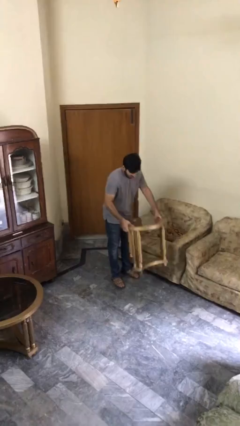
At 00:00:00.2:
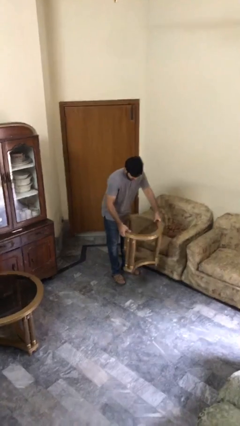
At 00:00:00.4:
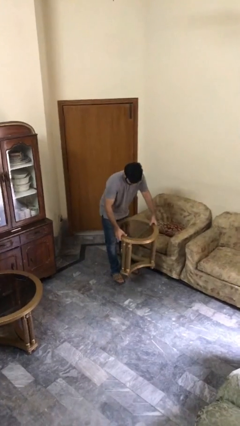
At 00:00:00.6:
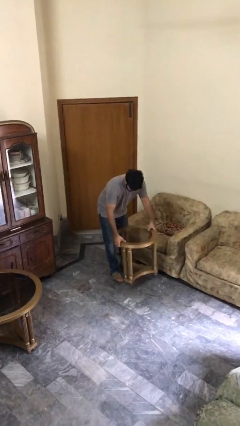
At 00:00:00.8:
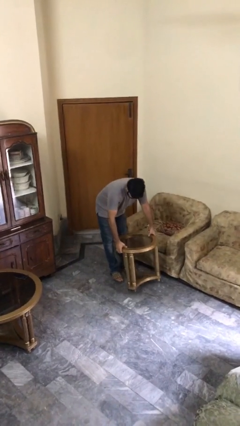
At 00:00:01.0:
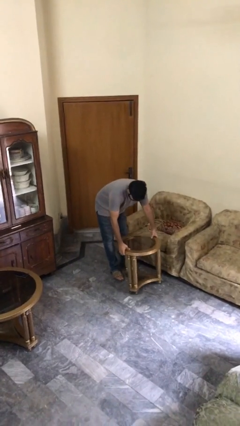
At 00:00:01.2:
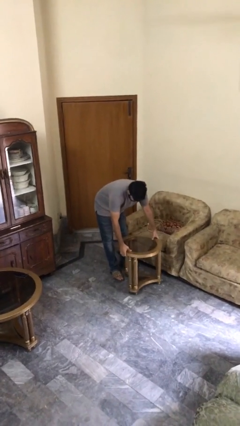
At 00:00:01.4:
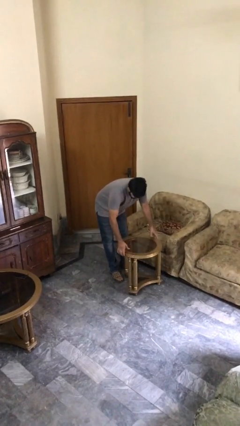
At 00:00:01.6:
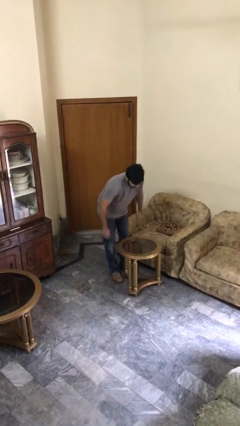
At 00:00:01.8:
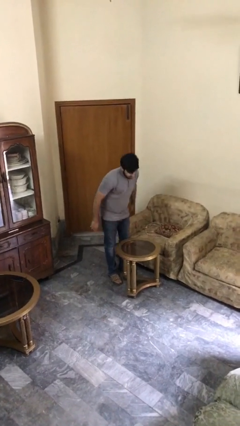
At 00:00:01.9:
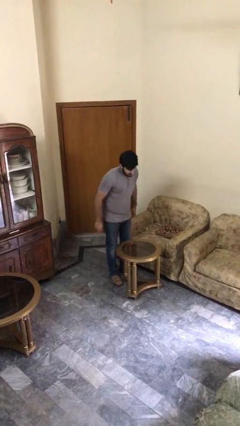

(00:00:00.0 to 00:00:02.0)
person puts down object on floor

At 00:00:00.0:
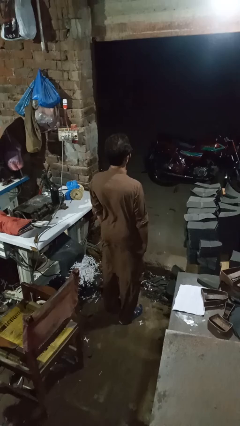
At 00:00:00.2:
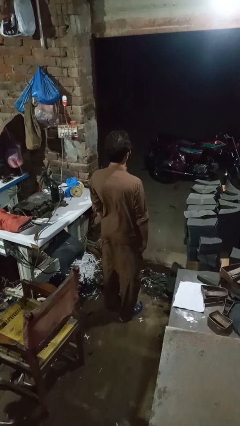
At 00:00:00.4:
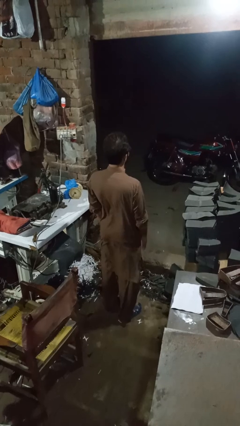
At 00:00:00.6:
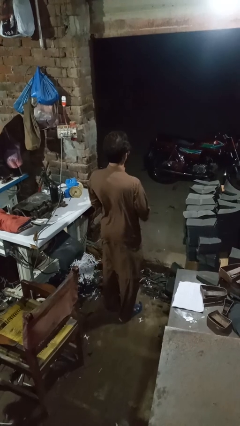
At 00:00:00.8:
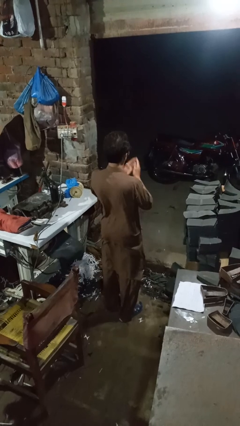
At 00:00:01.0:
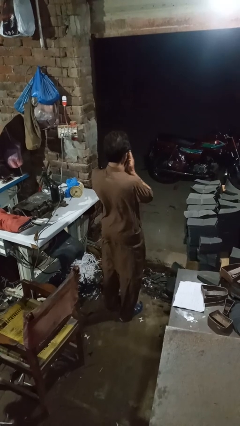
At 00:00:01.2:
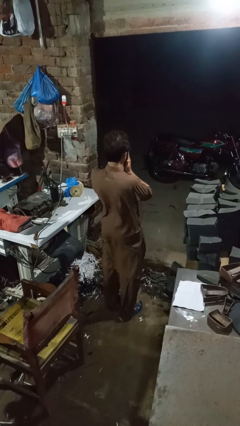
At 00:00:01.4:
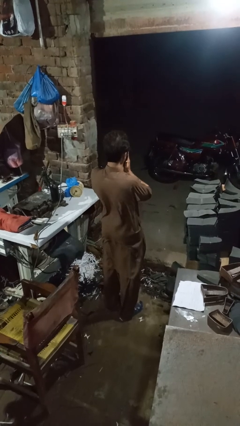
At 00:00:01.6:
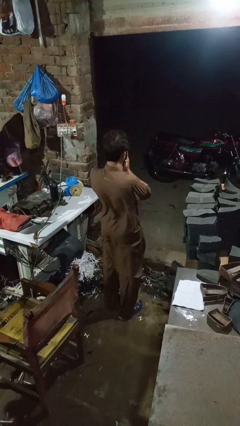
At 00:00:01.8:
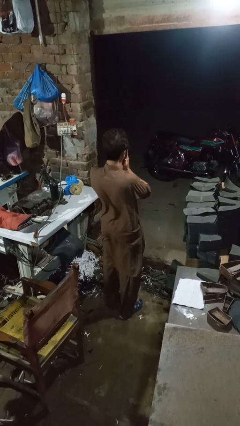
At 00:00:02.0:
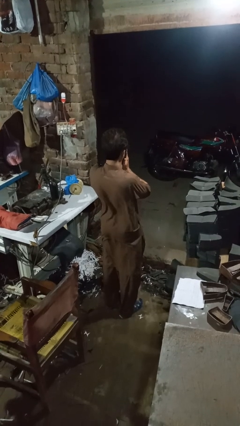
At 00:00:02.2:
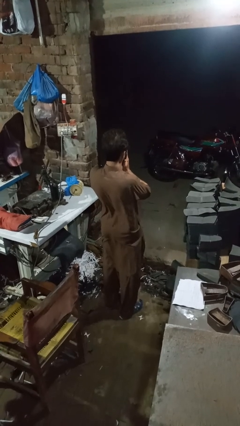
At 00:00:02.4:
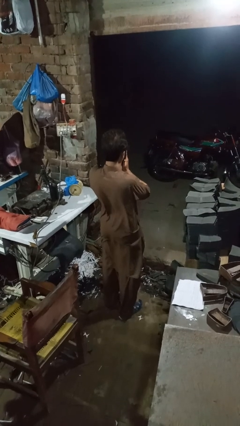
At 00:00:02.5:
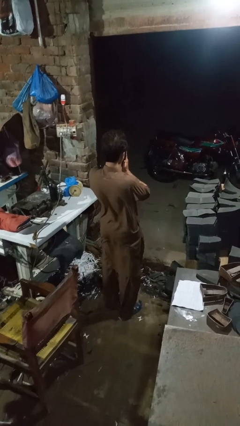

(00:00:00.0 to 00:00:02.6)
person sneezes into hand

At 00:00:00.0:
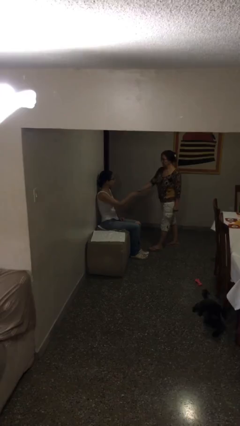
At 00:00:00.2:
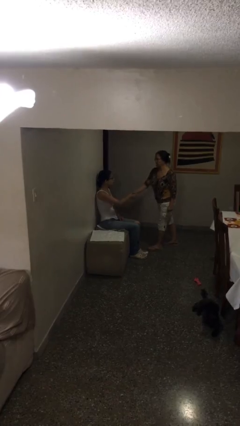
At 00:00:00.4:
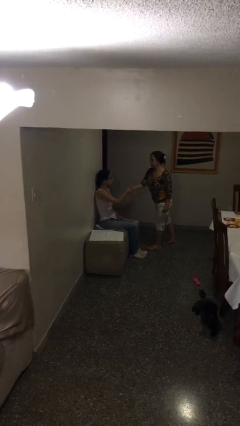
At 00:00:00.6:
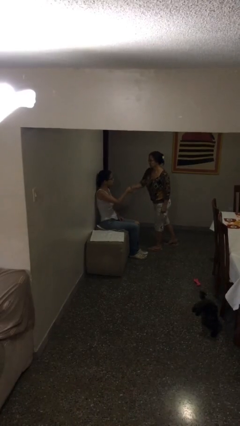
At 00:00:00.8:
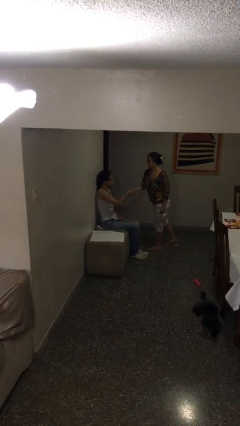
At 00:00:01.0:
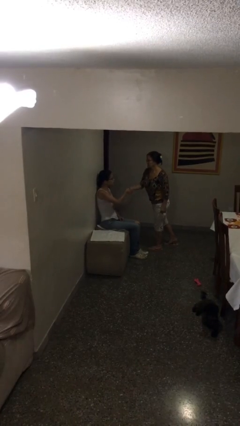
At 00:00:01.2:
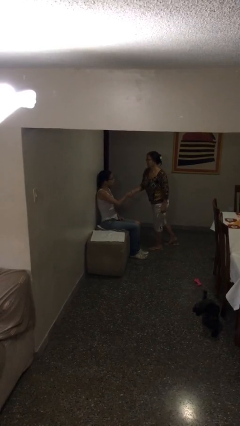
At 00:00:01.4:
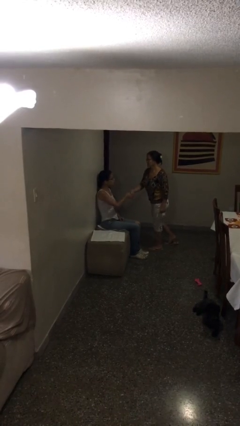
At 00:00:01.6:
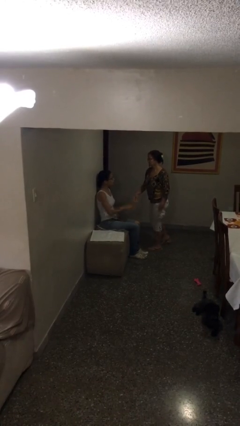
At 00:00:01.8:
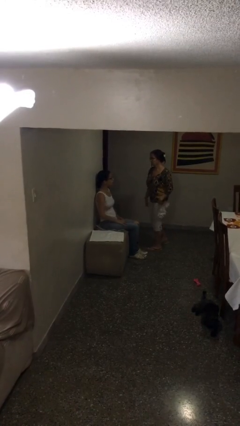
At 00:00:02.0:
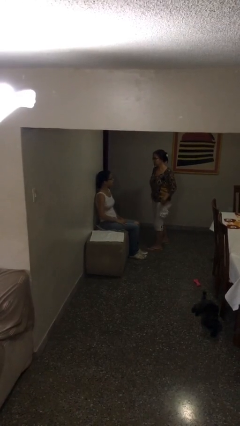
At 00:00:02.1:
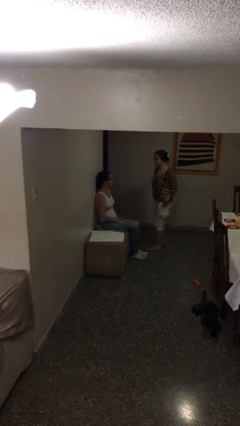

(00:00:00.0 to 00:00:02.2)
person shakes hand

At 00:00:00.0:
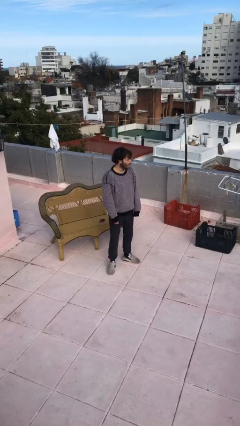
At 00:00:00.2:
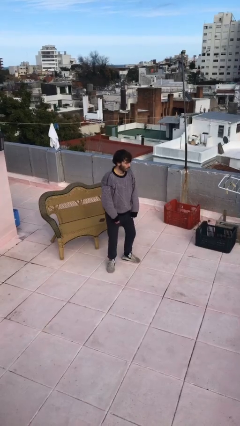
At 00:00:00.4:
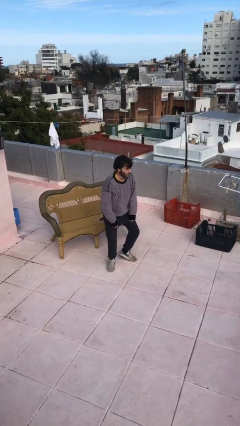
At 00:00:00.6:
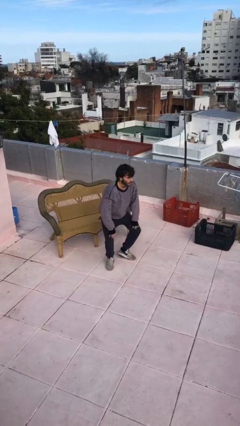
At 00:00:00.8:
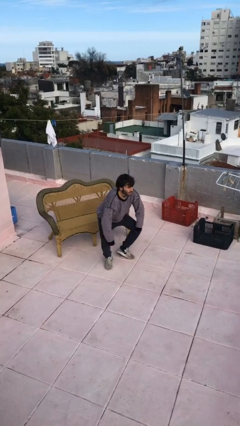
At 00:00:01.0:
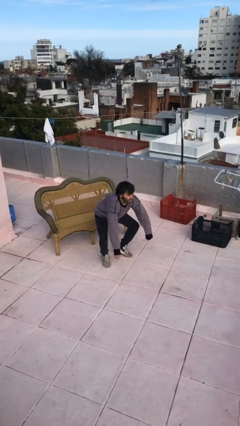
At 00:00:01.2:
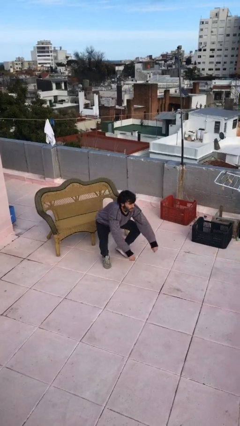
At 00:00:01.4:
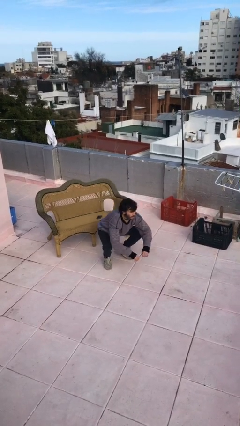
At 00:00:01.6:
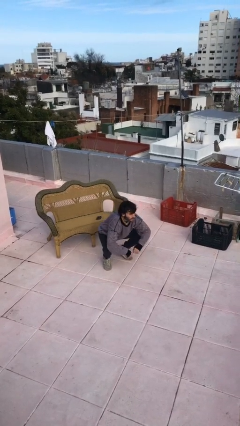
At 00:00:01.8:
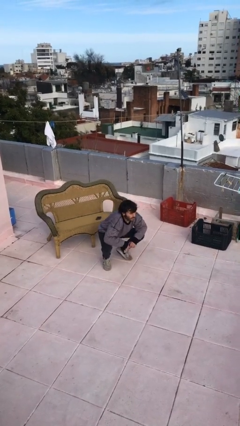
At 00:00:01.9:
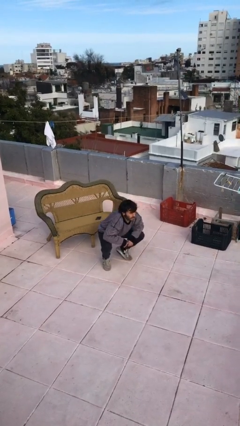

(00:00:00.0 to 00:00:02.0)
person squats

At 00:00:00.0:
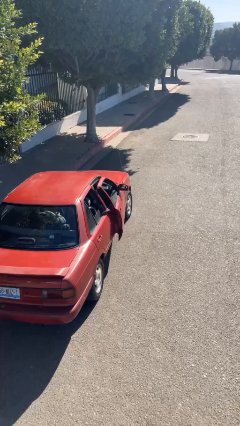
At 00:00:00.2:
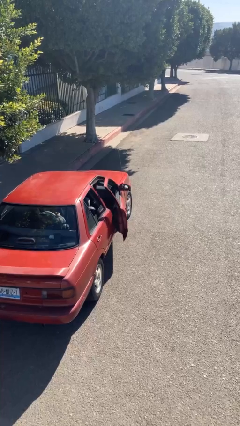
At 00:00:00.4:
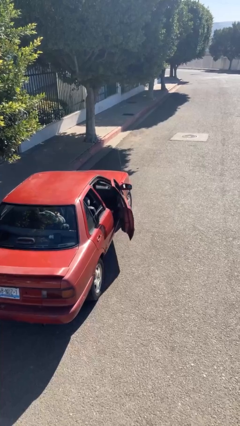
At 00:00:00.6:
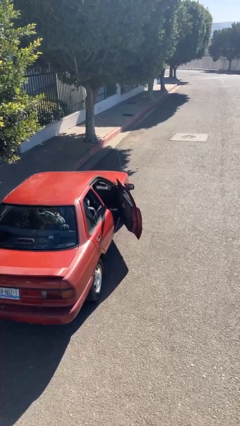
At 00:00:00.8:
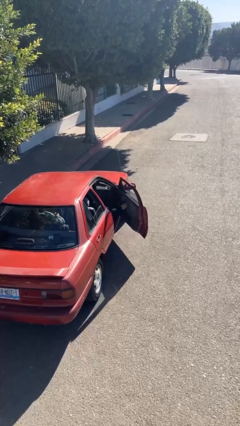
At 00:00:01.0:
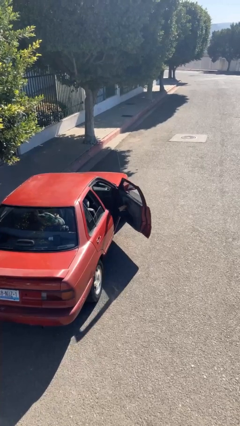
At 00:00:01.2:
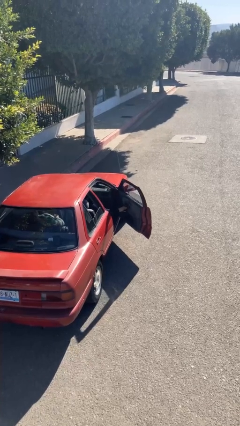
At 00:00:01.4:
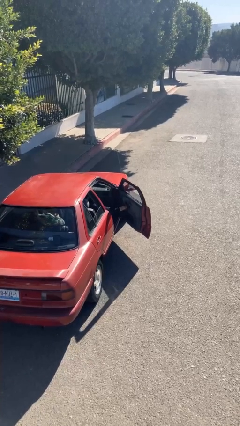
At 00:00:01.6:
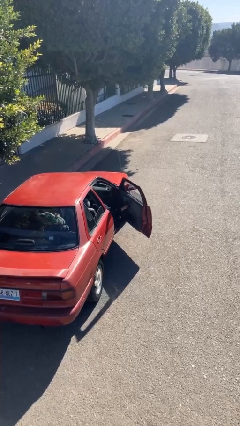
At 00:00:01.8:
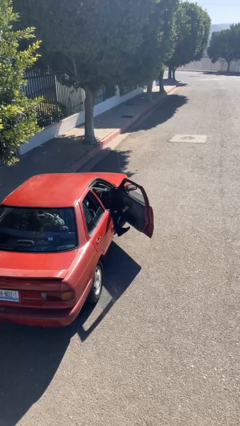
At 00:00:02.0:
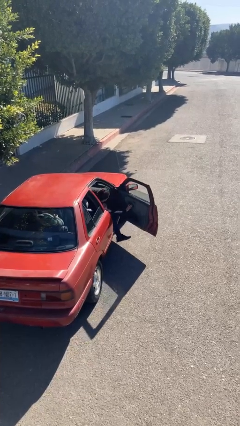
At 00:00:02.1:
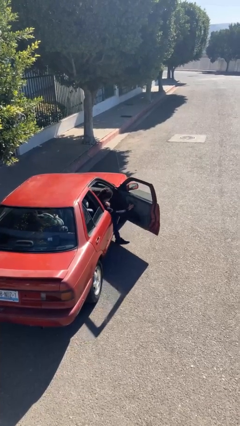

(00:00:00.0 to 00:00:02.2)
person opens car door

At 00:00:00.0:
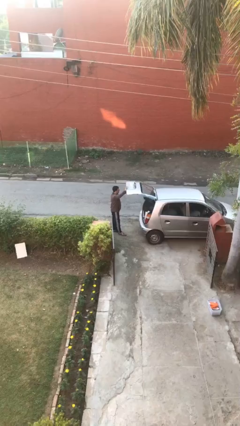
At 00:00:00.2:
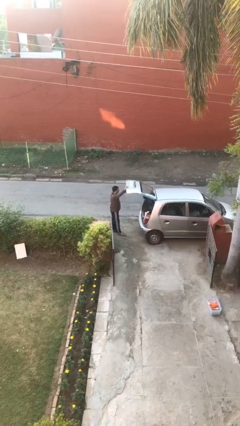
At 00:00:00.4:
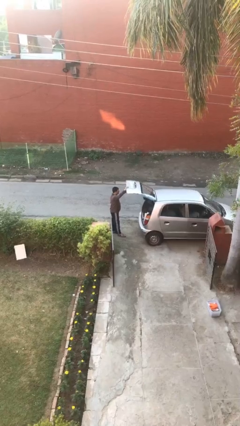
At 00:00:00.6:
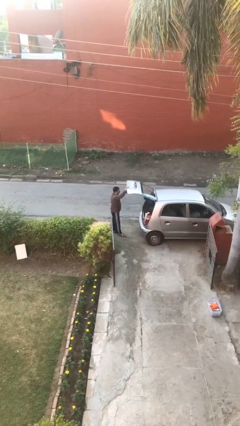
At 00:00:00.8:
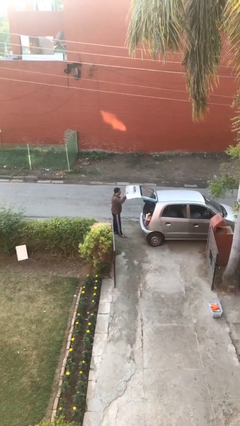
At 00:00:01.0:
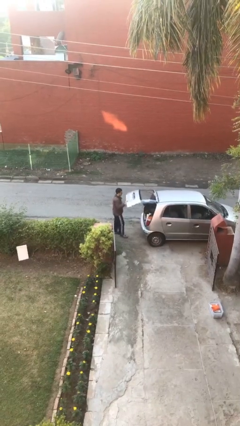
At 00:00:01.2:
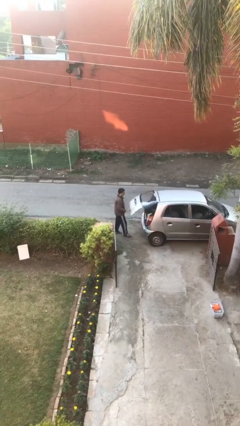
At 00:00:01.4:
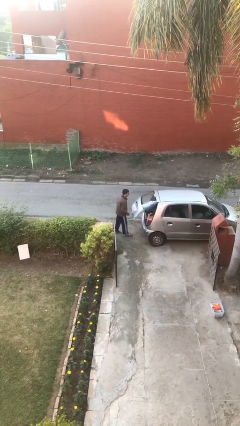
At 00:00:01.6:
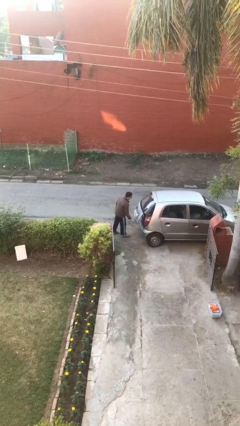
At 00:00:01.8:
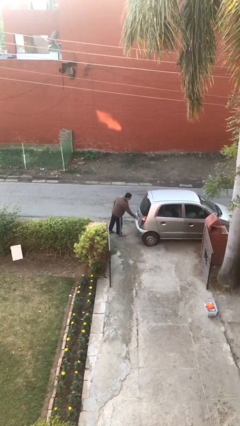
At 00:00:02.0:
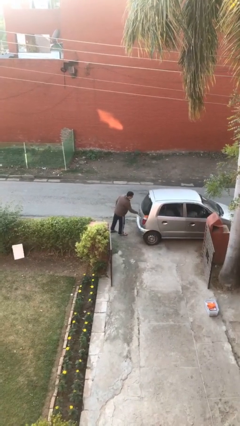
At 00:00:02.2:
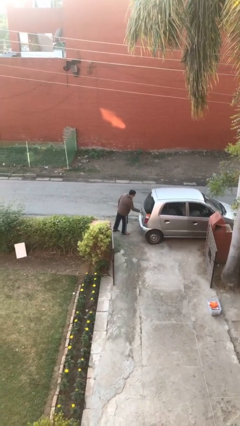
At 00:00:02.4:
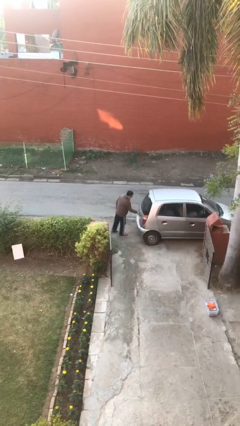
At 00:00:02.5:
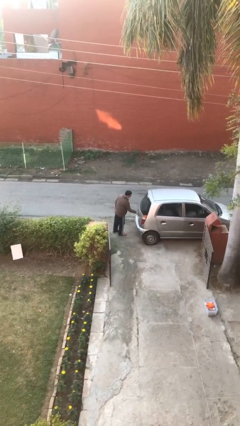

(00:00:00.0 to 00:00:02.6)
person closes car trunk

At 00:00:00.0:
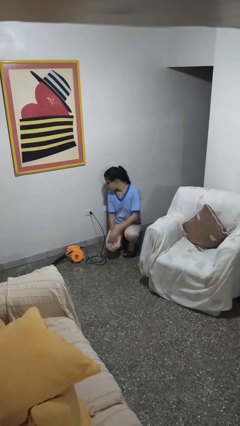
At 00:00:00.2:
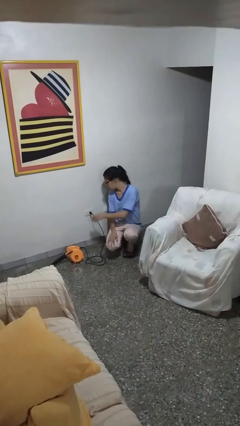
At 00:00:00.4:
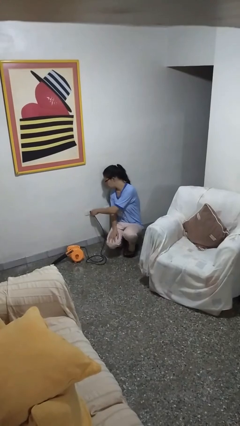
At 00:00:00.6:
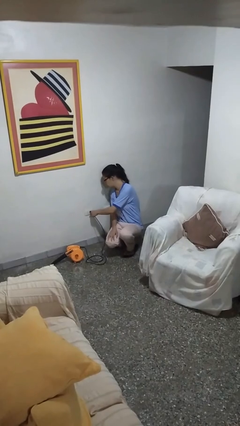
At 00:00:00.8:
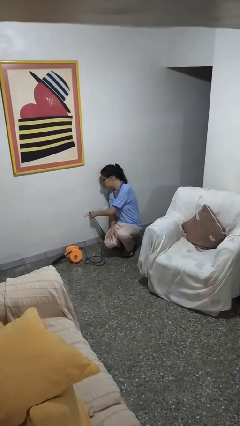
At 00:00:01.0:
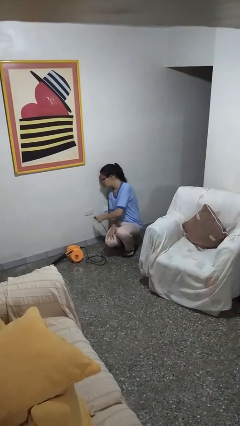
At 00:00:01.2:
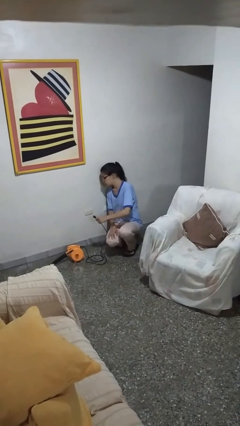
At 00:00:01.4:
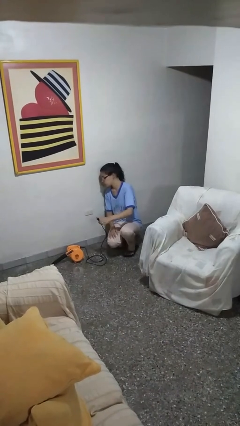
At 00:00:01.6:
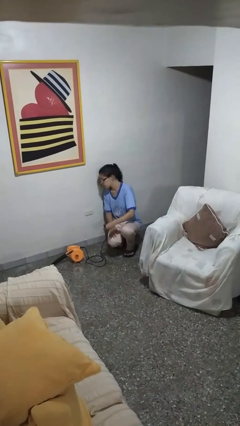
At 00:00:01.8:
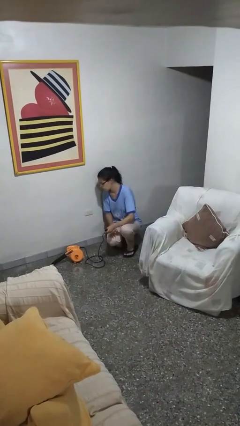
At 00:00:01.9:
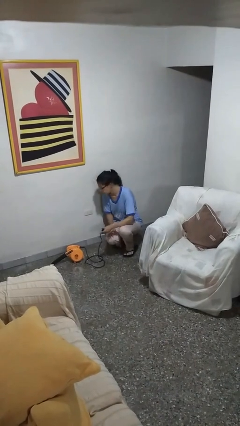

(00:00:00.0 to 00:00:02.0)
person unplugs from electrical socket

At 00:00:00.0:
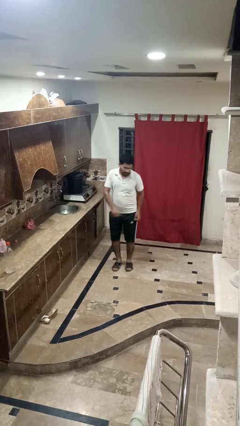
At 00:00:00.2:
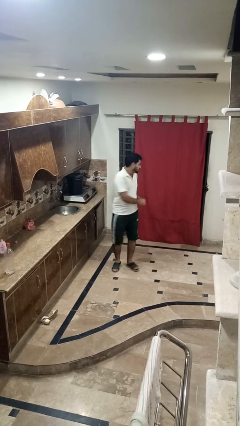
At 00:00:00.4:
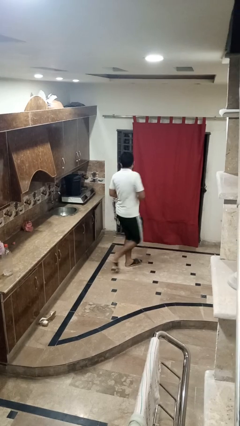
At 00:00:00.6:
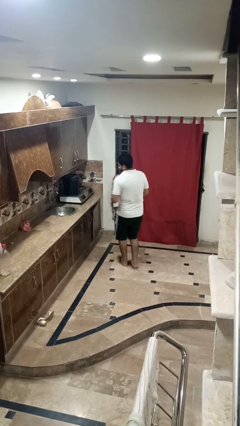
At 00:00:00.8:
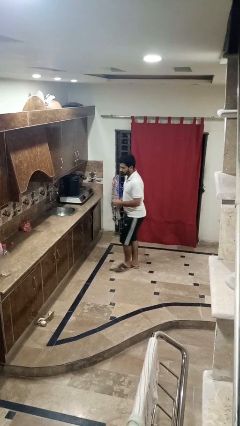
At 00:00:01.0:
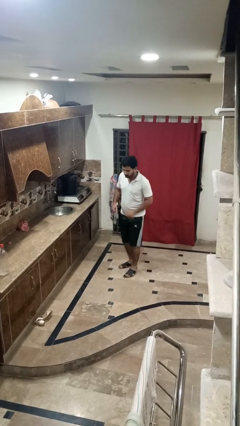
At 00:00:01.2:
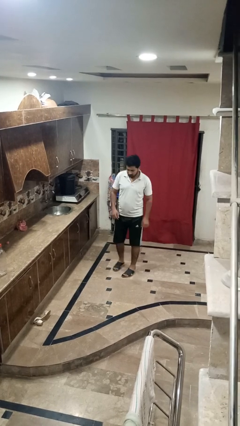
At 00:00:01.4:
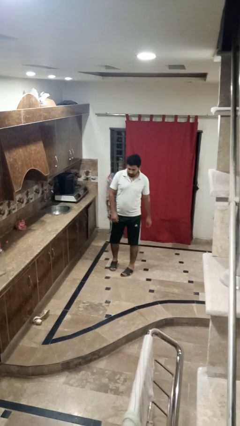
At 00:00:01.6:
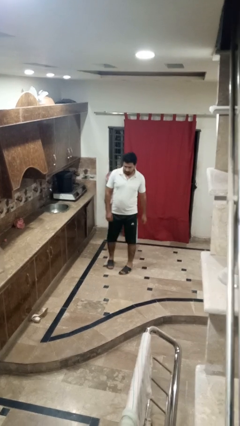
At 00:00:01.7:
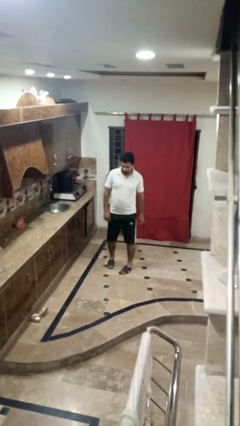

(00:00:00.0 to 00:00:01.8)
person twirls
